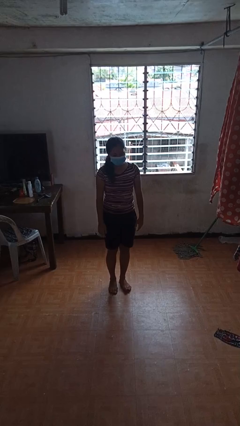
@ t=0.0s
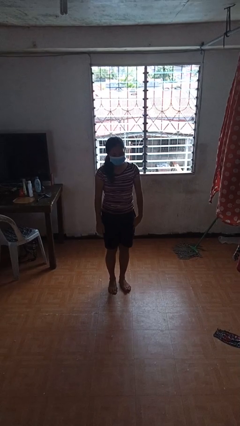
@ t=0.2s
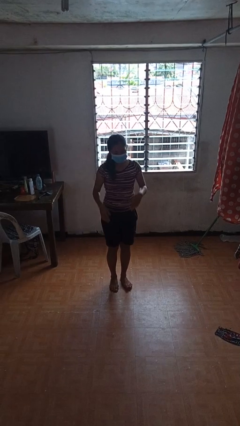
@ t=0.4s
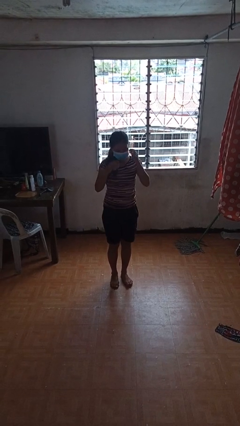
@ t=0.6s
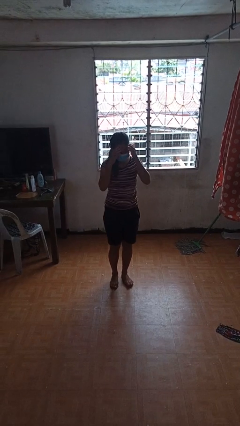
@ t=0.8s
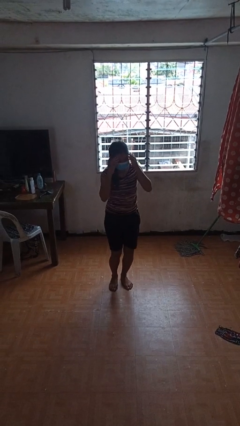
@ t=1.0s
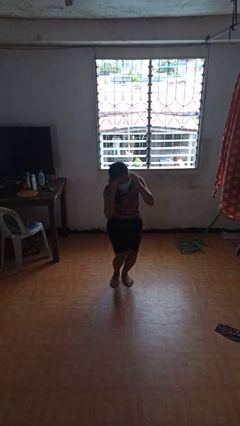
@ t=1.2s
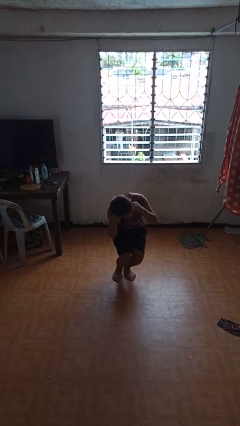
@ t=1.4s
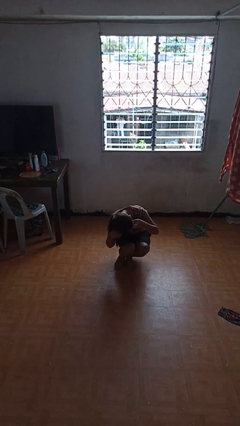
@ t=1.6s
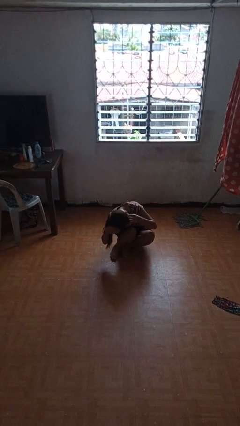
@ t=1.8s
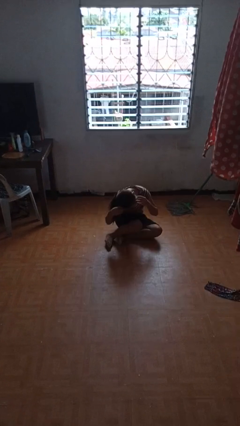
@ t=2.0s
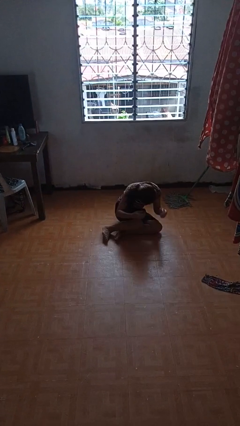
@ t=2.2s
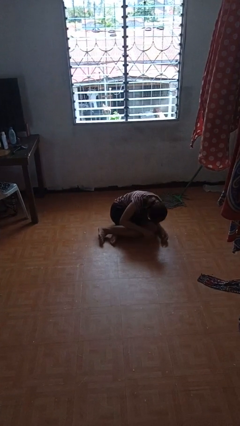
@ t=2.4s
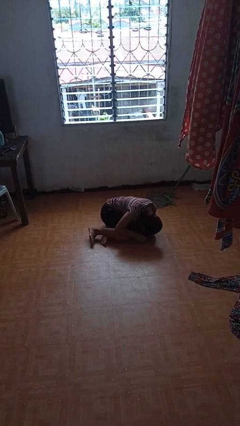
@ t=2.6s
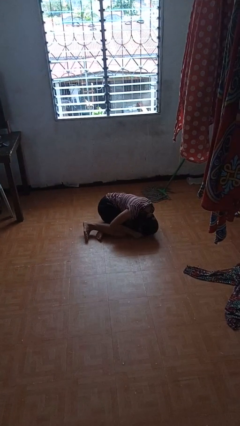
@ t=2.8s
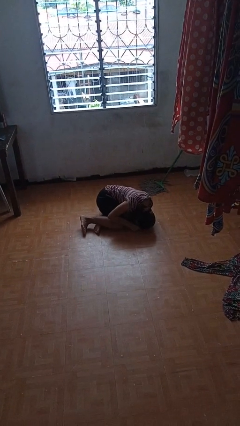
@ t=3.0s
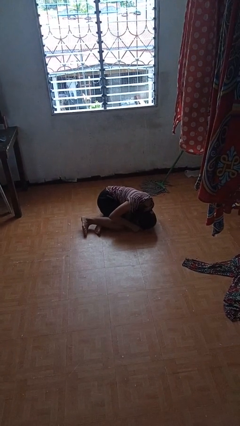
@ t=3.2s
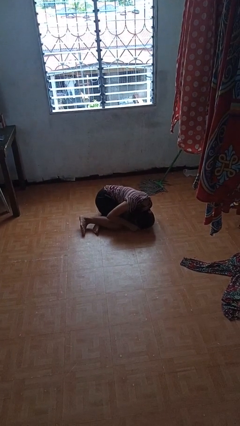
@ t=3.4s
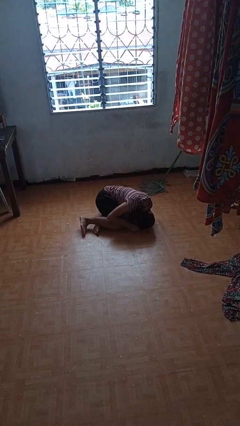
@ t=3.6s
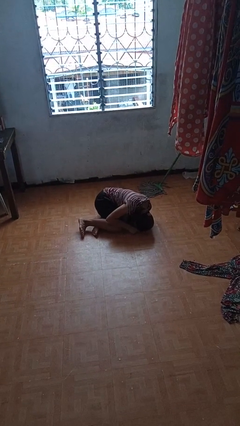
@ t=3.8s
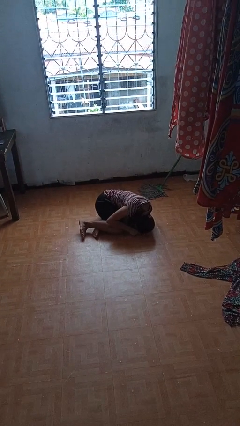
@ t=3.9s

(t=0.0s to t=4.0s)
person falls while standing

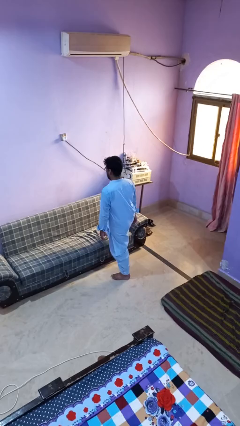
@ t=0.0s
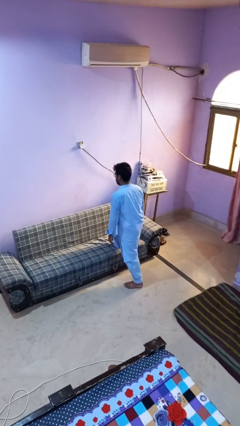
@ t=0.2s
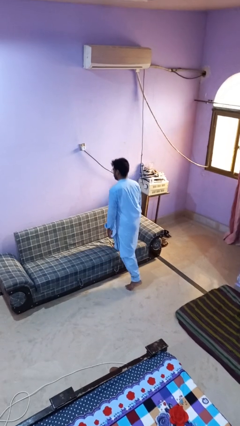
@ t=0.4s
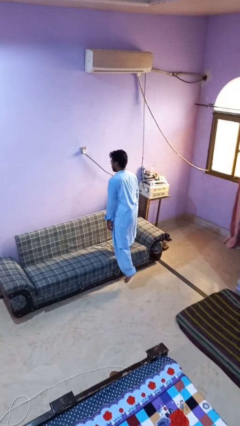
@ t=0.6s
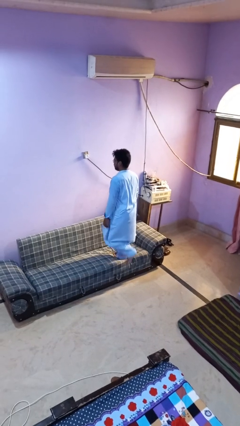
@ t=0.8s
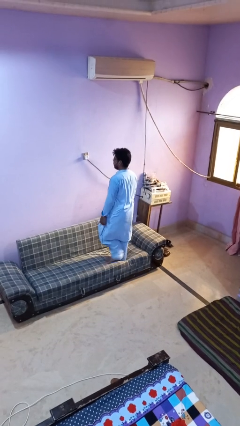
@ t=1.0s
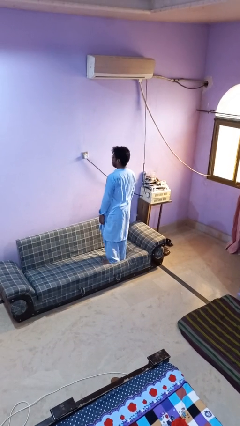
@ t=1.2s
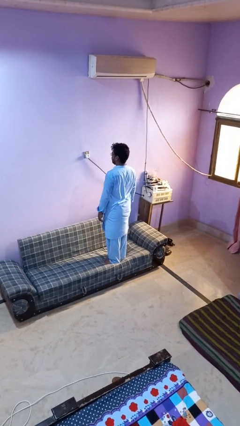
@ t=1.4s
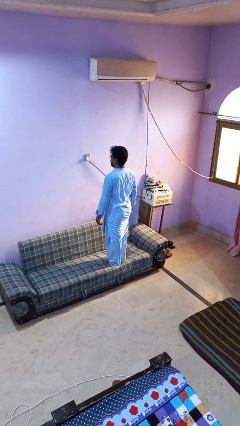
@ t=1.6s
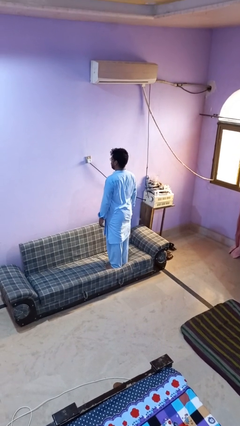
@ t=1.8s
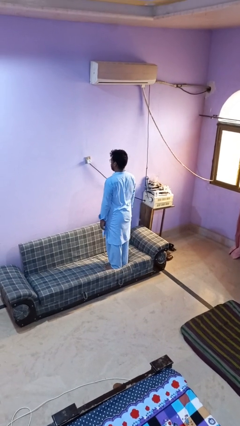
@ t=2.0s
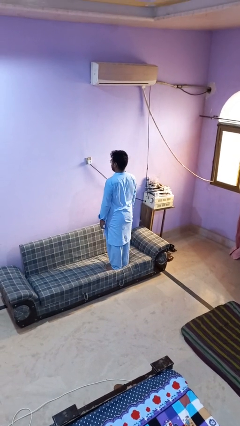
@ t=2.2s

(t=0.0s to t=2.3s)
person climbs on couch

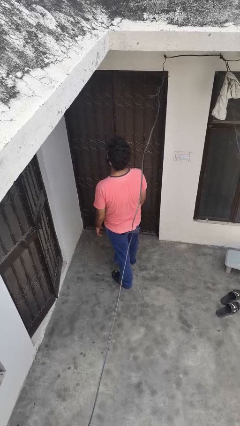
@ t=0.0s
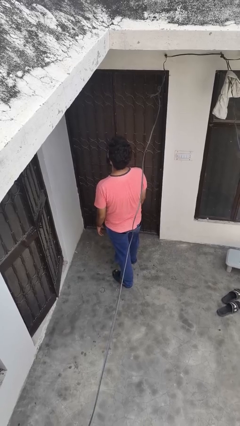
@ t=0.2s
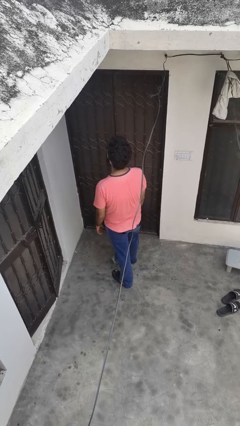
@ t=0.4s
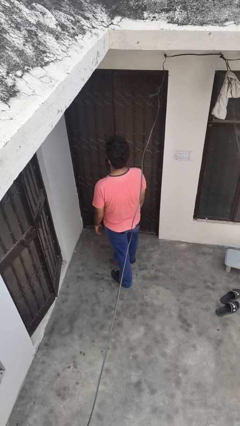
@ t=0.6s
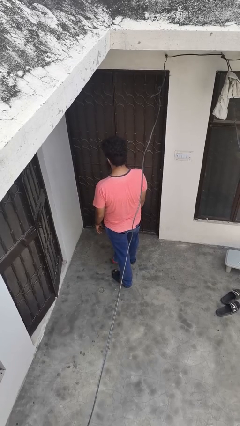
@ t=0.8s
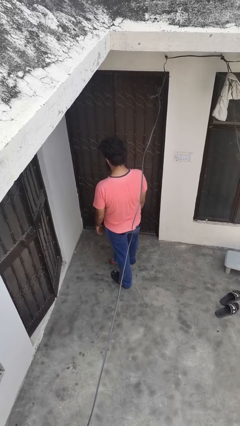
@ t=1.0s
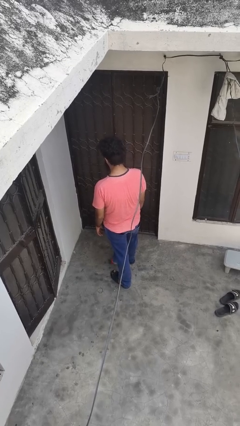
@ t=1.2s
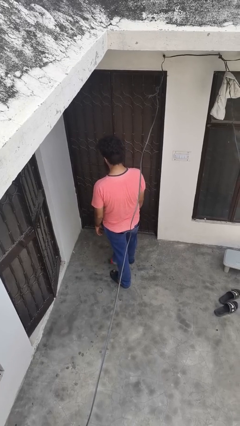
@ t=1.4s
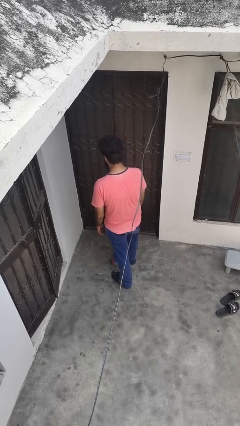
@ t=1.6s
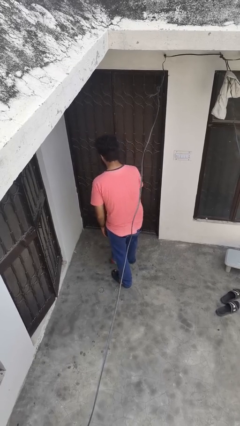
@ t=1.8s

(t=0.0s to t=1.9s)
person drops object

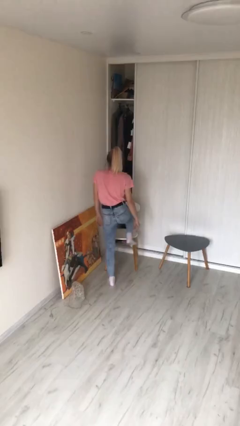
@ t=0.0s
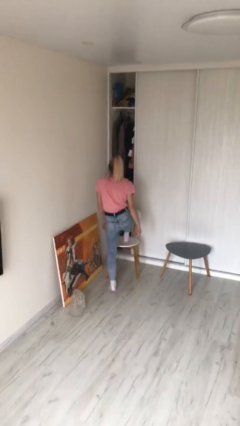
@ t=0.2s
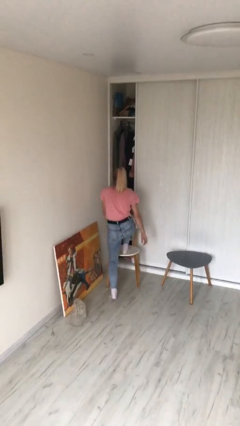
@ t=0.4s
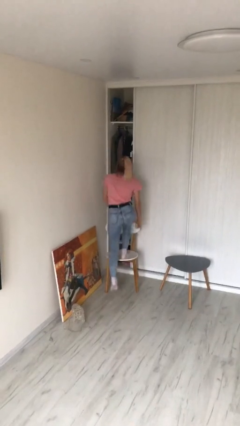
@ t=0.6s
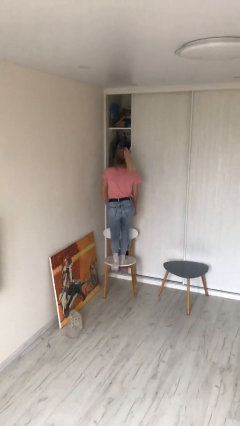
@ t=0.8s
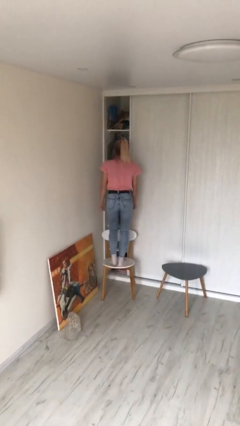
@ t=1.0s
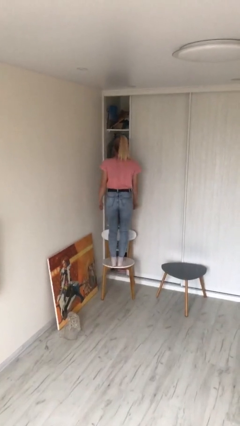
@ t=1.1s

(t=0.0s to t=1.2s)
person climbs on chair

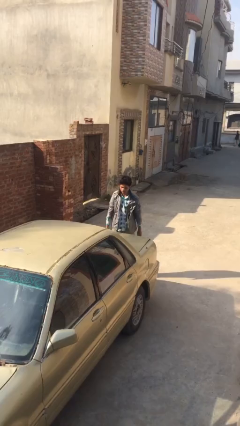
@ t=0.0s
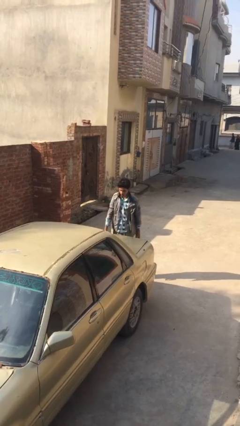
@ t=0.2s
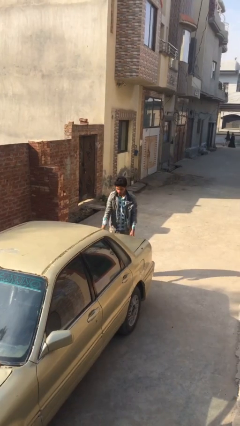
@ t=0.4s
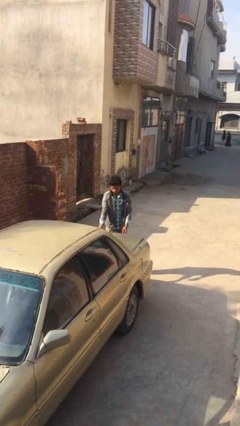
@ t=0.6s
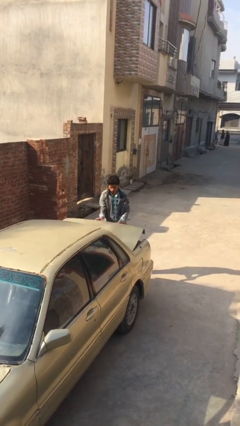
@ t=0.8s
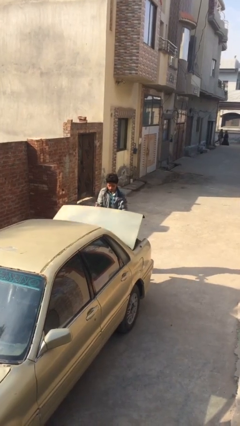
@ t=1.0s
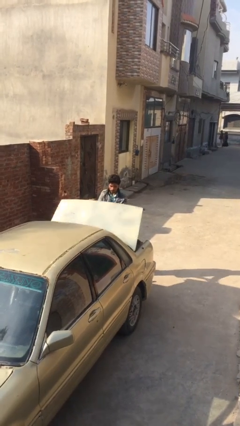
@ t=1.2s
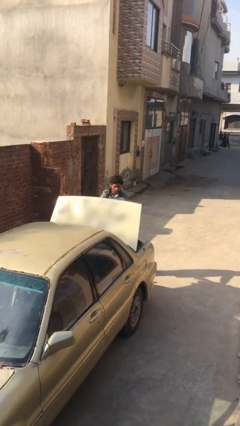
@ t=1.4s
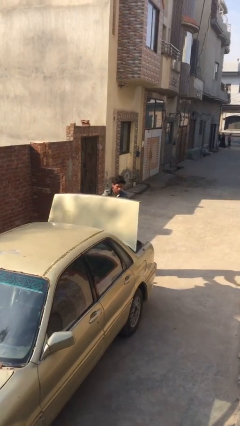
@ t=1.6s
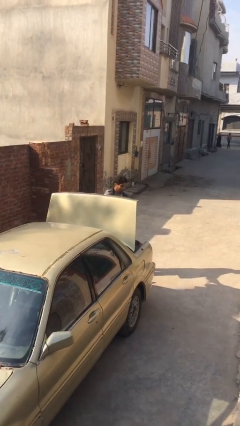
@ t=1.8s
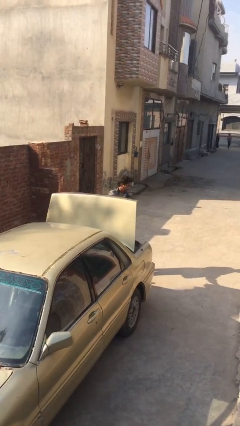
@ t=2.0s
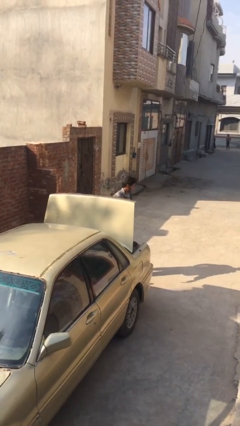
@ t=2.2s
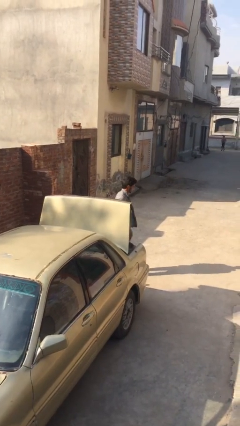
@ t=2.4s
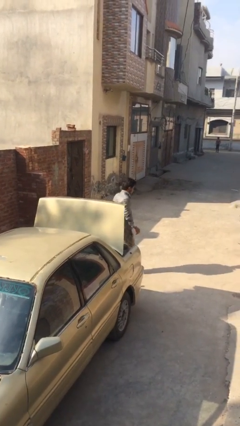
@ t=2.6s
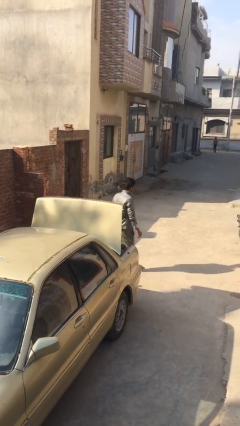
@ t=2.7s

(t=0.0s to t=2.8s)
person opens car trunk

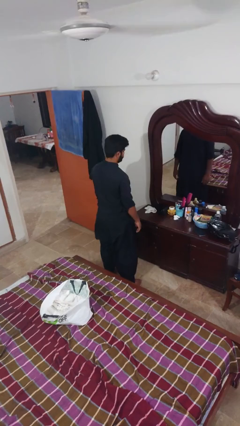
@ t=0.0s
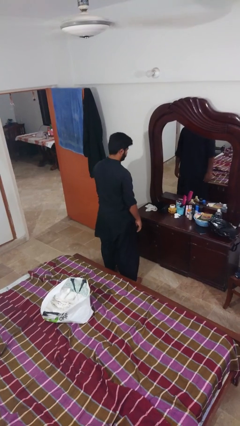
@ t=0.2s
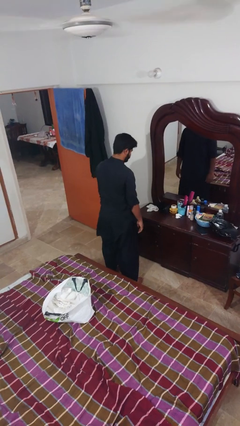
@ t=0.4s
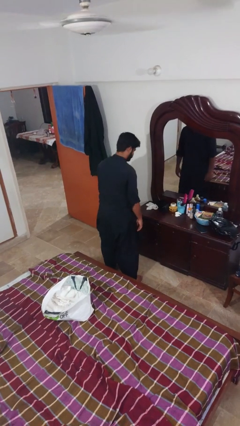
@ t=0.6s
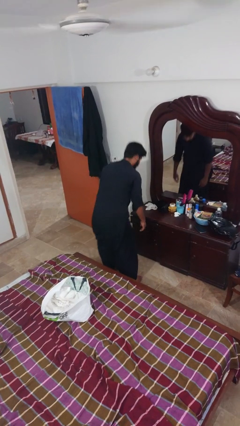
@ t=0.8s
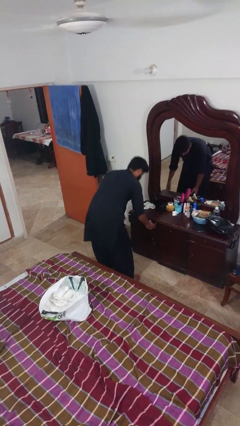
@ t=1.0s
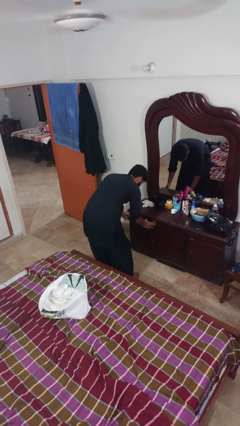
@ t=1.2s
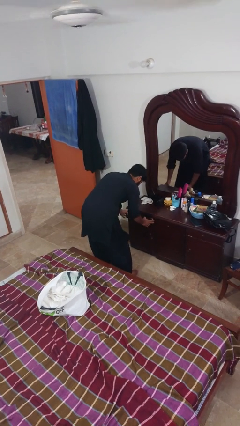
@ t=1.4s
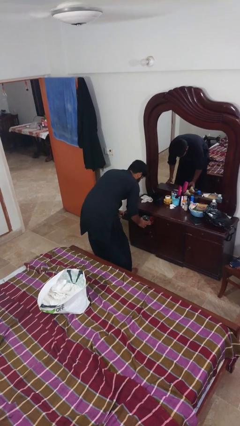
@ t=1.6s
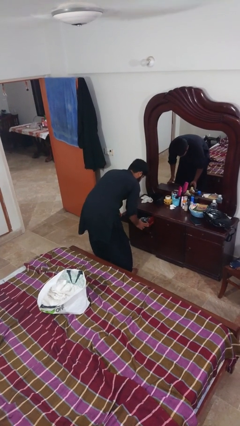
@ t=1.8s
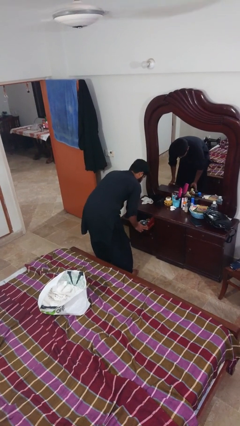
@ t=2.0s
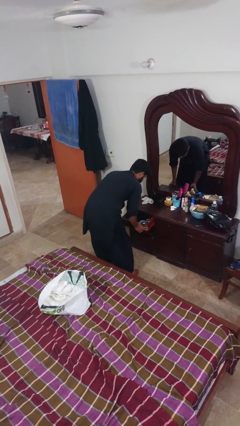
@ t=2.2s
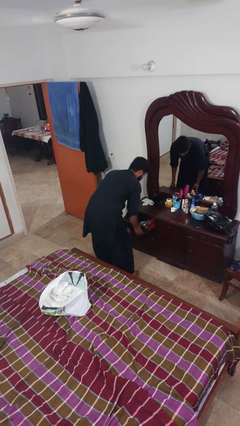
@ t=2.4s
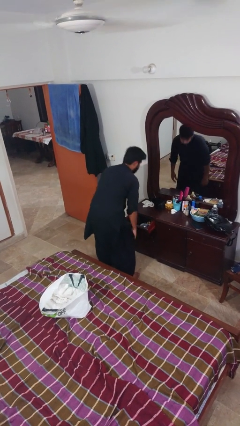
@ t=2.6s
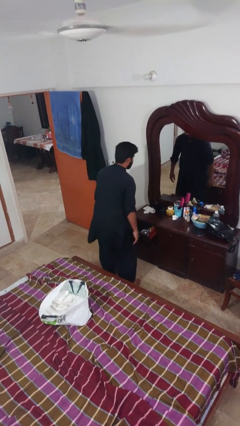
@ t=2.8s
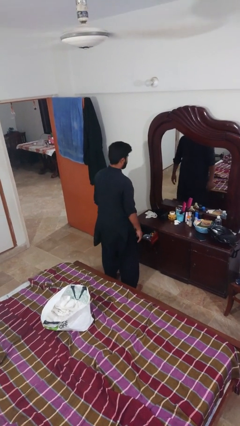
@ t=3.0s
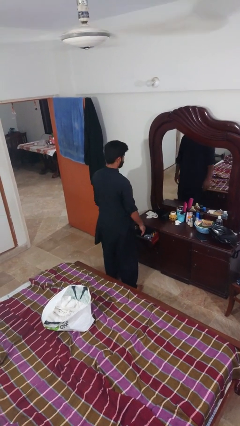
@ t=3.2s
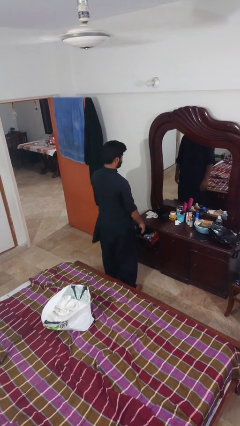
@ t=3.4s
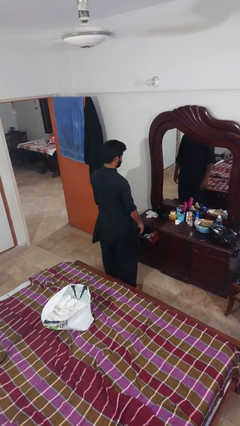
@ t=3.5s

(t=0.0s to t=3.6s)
person opens dresser drawer

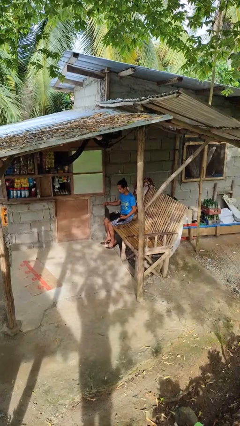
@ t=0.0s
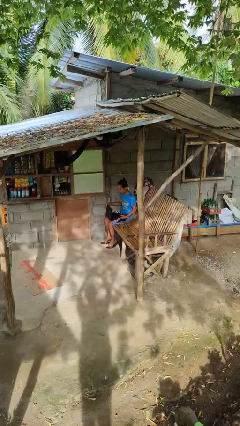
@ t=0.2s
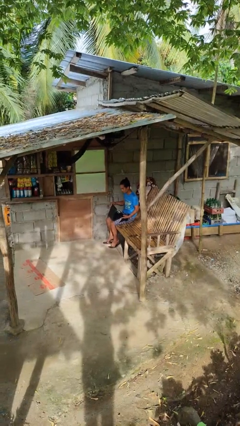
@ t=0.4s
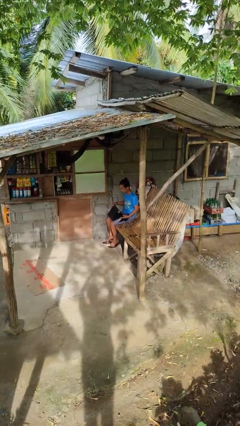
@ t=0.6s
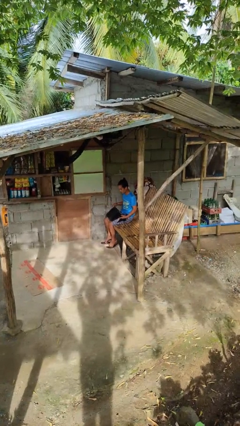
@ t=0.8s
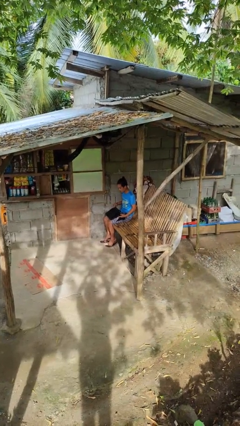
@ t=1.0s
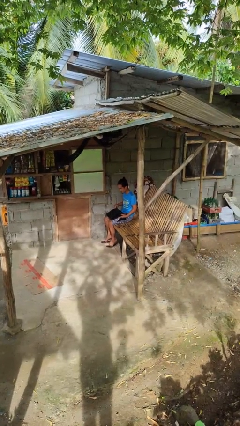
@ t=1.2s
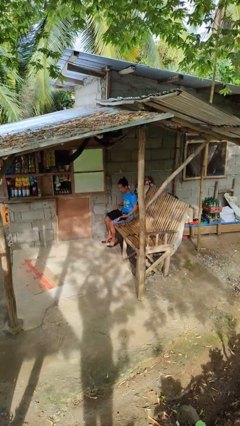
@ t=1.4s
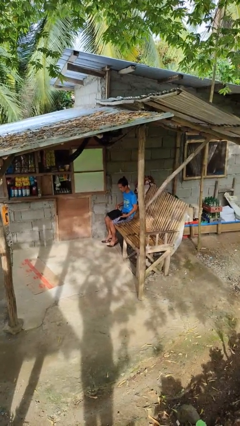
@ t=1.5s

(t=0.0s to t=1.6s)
person closes laptop
